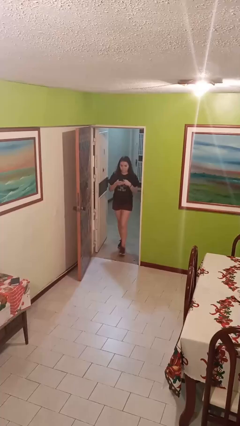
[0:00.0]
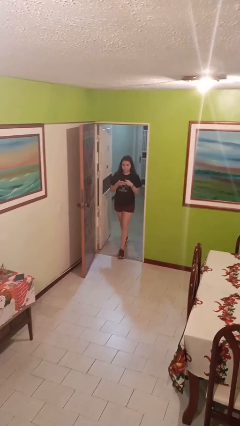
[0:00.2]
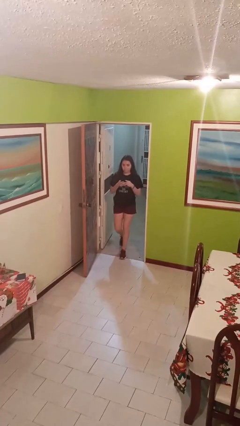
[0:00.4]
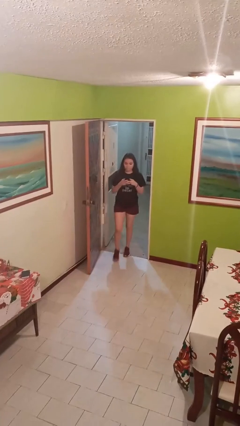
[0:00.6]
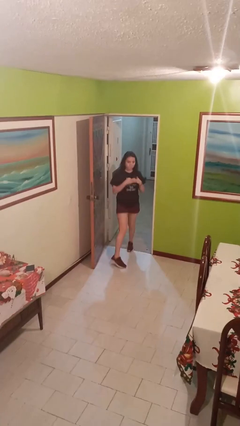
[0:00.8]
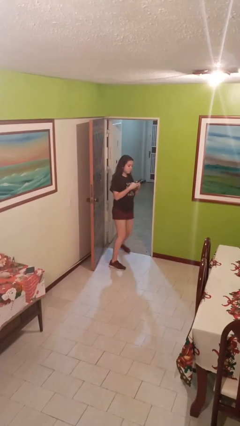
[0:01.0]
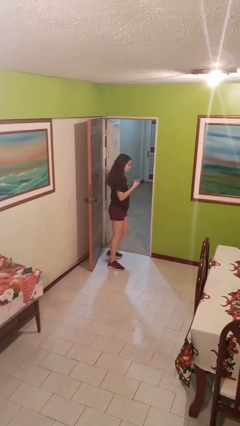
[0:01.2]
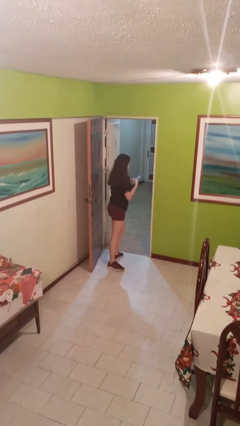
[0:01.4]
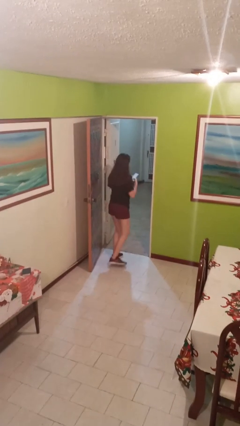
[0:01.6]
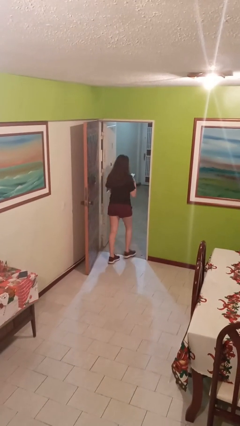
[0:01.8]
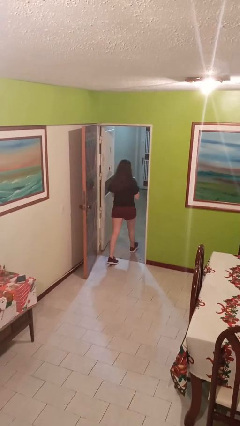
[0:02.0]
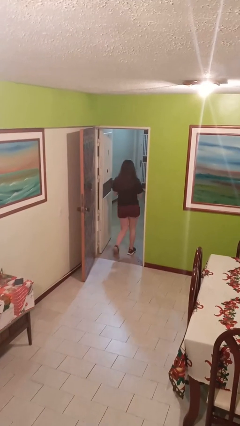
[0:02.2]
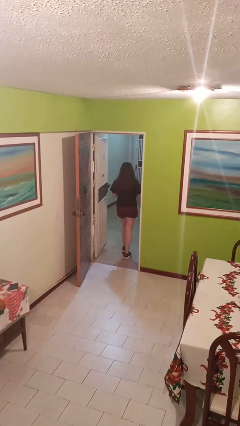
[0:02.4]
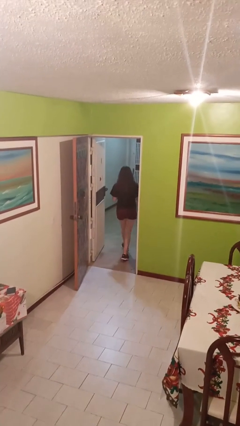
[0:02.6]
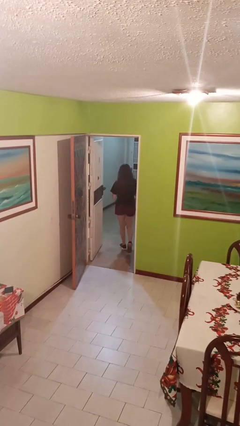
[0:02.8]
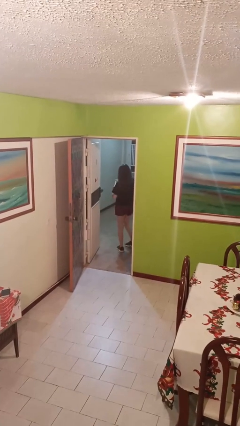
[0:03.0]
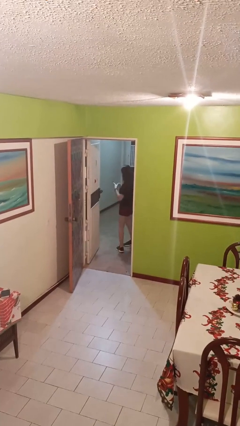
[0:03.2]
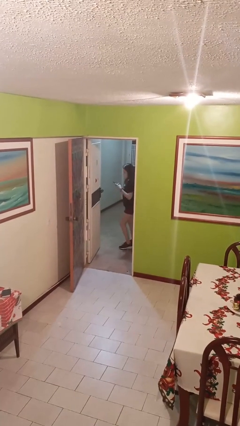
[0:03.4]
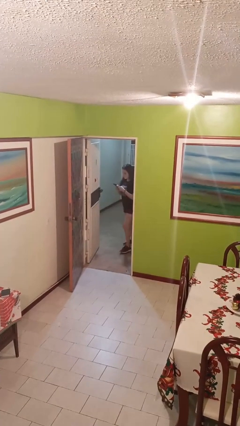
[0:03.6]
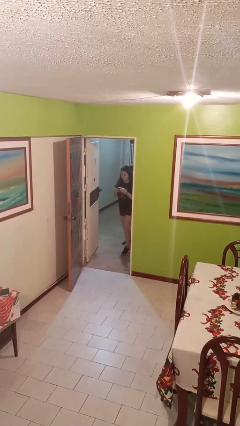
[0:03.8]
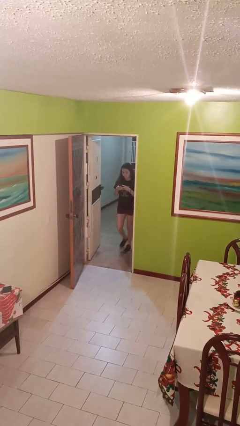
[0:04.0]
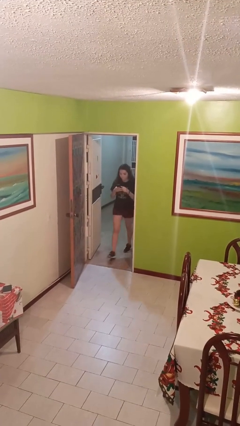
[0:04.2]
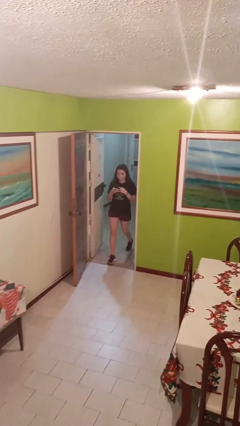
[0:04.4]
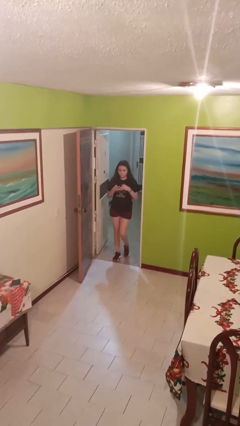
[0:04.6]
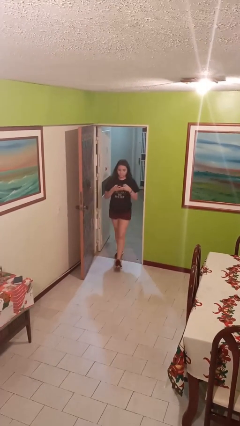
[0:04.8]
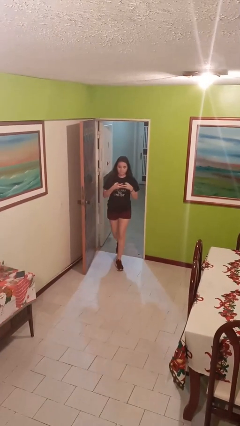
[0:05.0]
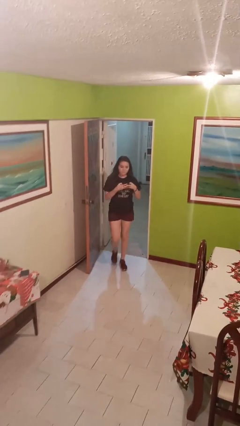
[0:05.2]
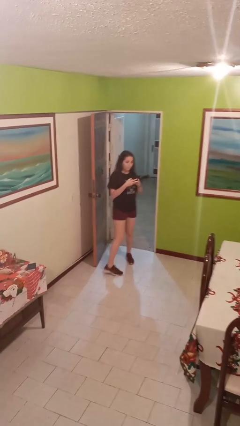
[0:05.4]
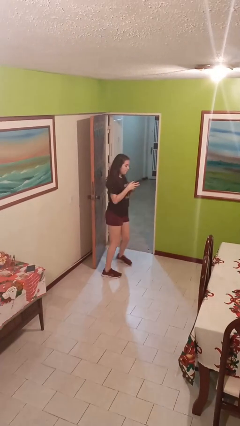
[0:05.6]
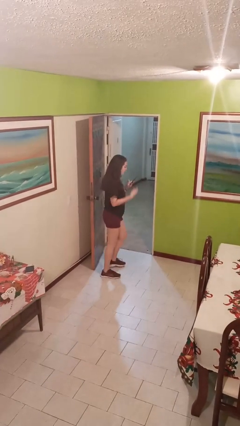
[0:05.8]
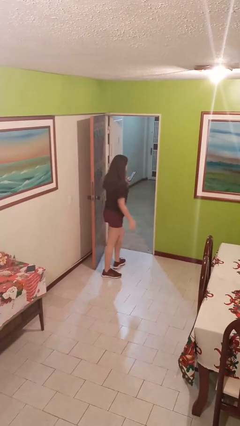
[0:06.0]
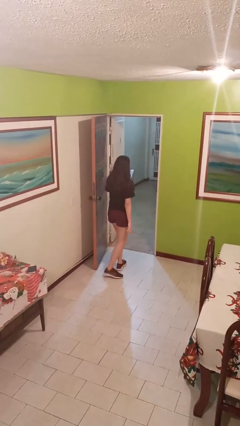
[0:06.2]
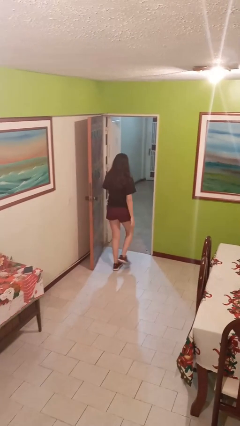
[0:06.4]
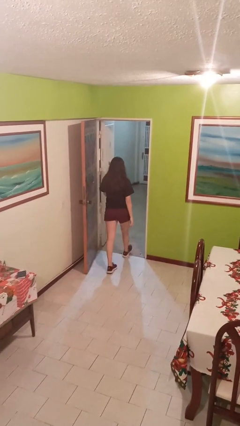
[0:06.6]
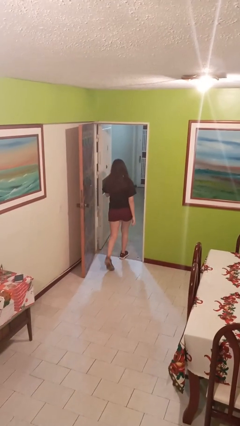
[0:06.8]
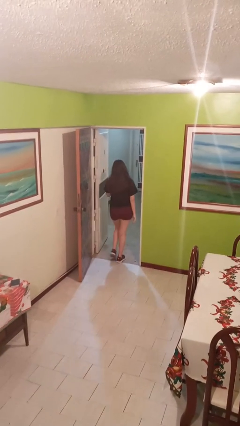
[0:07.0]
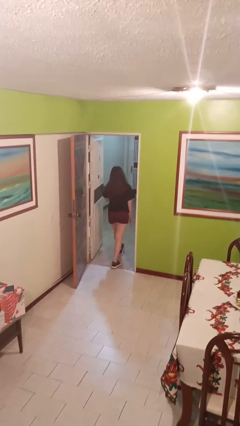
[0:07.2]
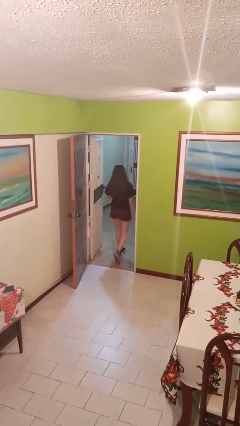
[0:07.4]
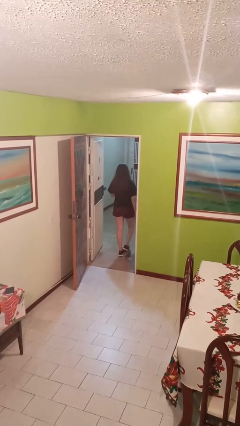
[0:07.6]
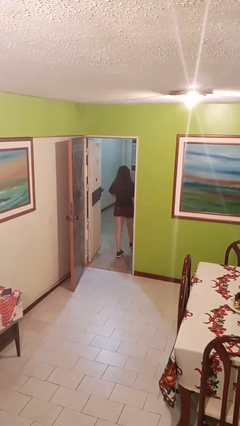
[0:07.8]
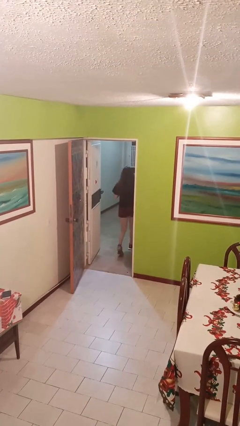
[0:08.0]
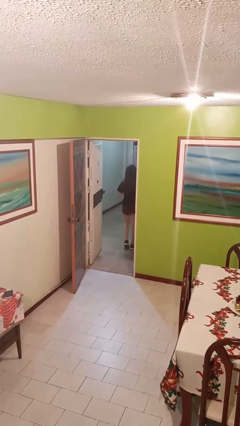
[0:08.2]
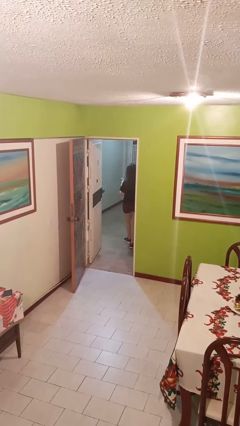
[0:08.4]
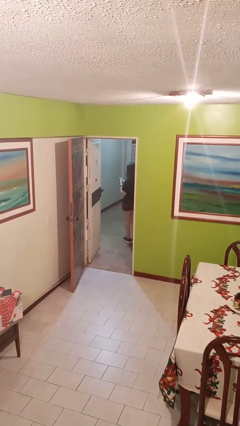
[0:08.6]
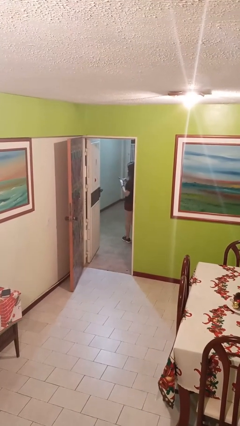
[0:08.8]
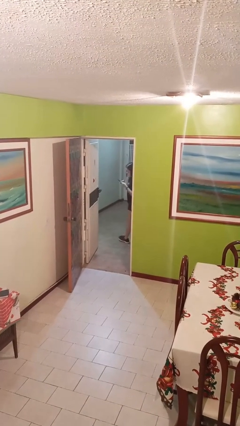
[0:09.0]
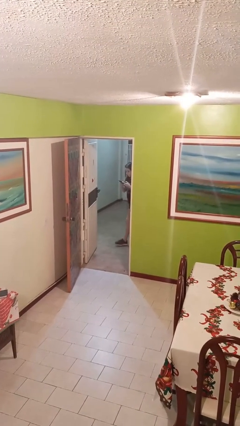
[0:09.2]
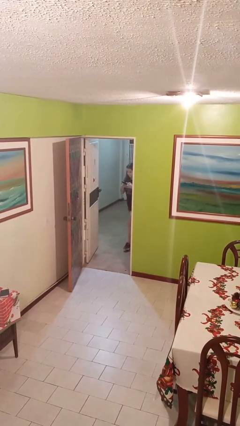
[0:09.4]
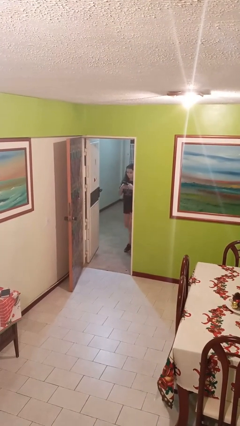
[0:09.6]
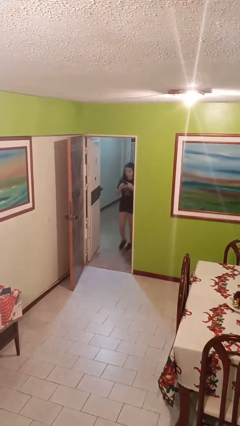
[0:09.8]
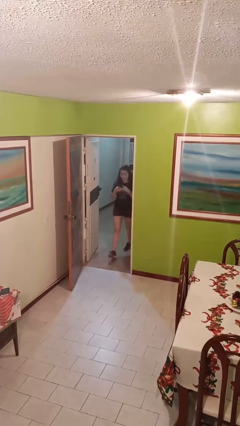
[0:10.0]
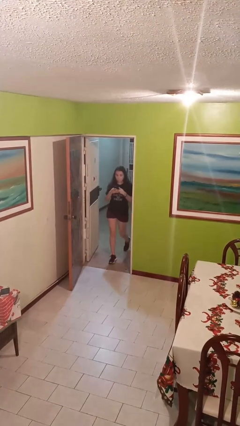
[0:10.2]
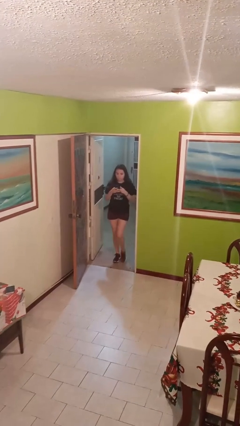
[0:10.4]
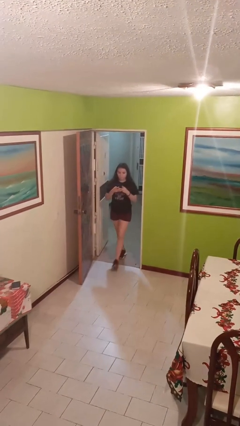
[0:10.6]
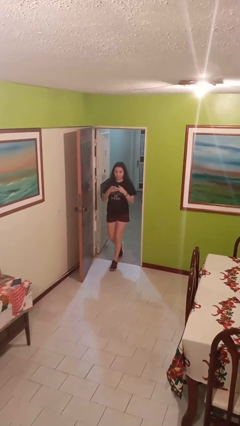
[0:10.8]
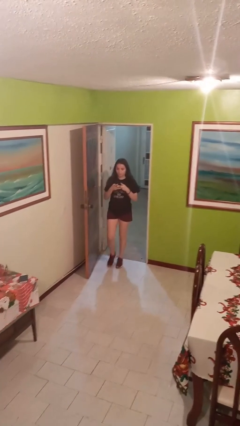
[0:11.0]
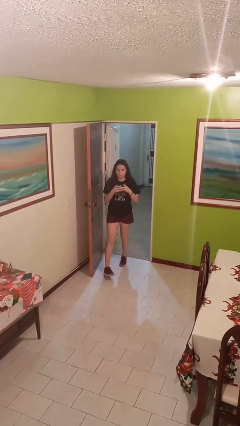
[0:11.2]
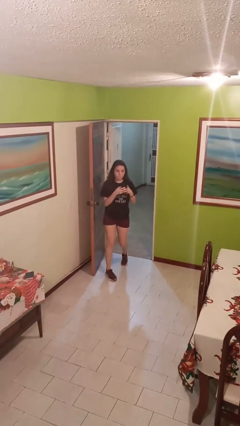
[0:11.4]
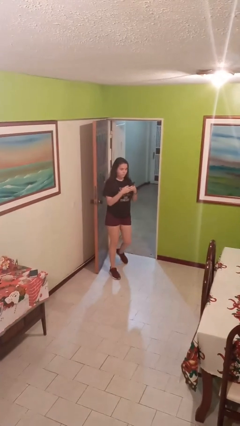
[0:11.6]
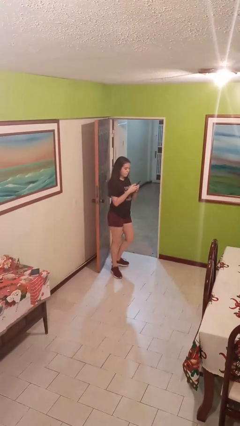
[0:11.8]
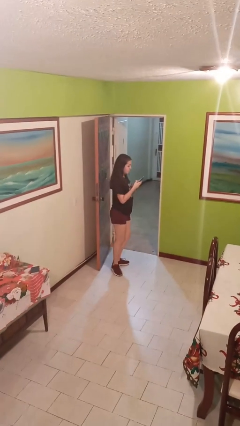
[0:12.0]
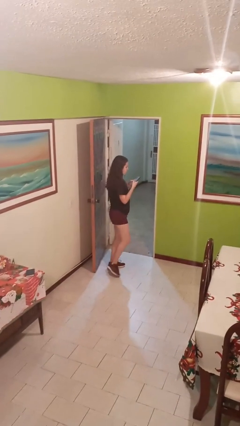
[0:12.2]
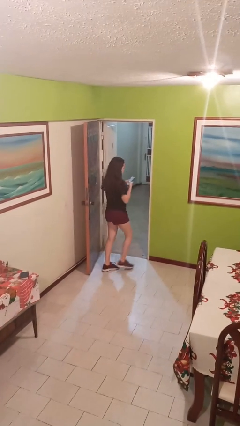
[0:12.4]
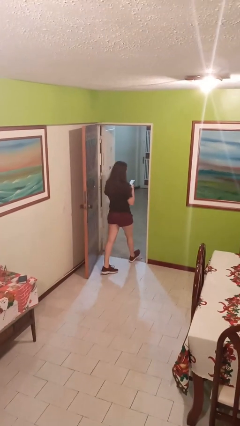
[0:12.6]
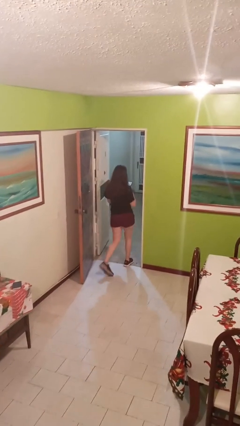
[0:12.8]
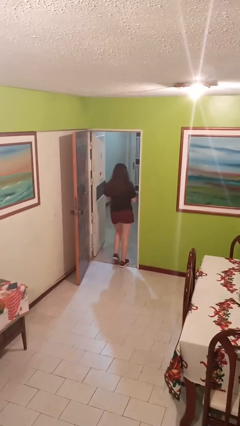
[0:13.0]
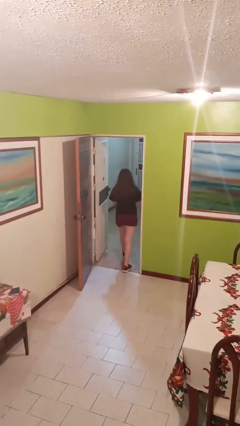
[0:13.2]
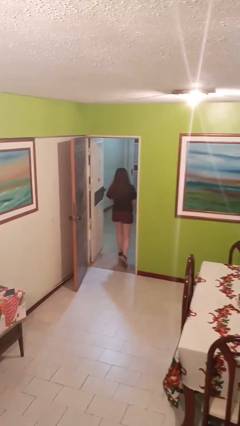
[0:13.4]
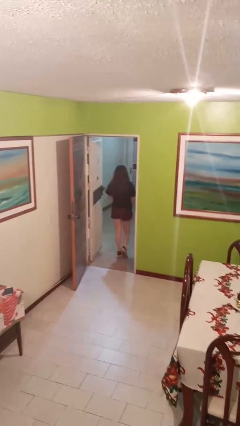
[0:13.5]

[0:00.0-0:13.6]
person texts on phone

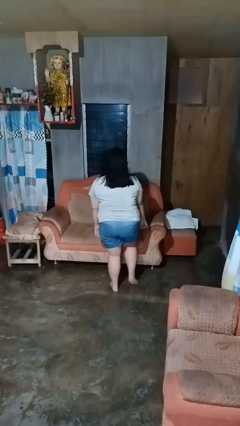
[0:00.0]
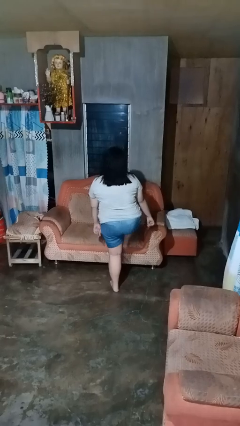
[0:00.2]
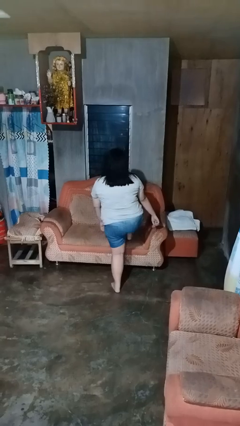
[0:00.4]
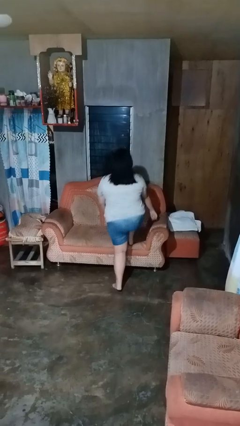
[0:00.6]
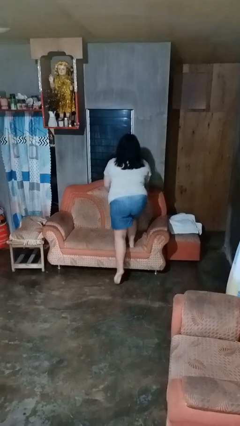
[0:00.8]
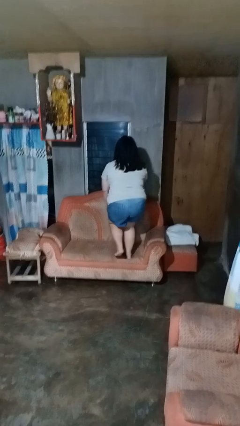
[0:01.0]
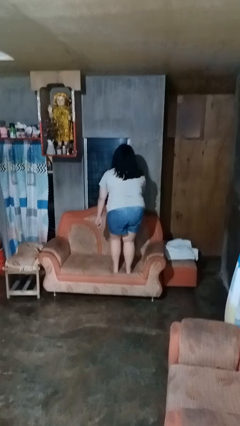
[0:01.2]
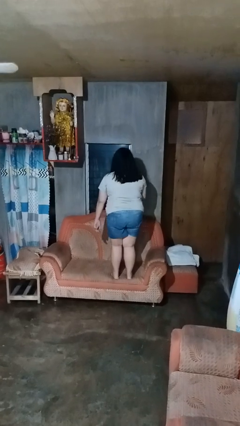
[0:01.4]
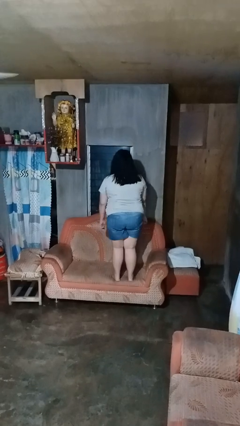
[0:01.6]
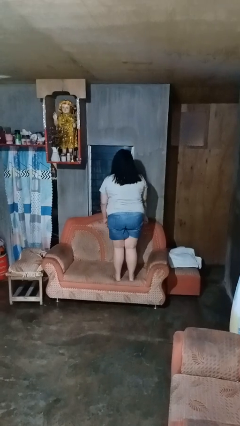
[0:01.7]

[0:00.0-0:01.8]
person climbs on couch

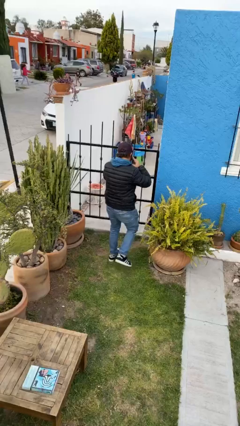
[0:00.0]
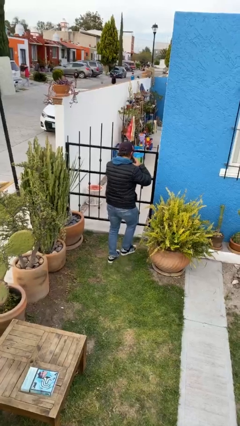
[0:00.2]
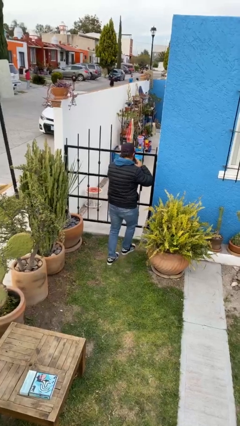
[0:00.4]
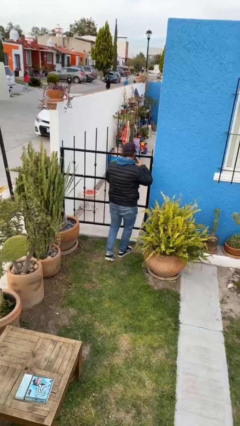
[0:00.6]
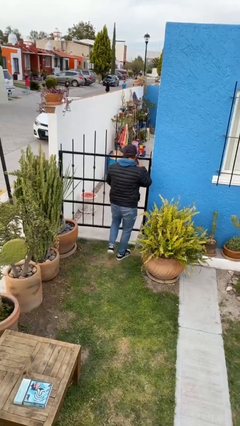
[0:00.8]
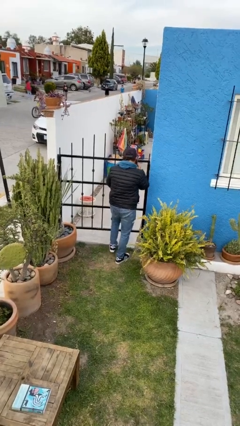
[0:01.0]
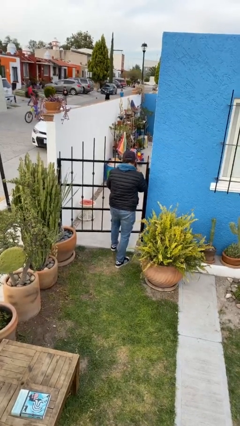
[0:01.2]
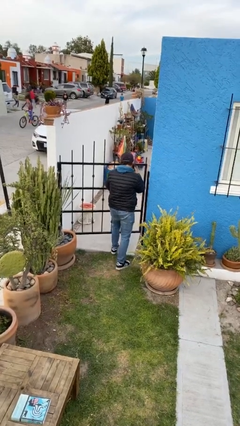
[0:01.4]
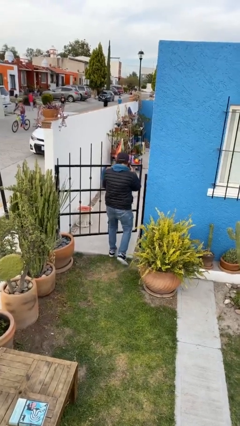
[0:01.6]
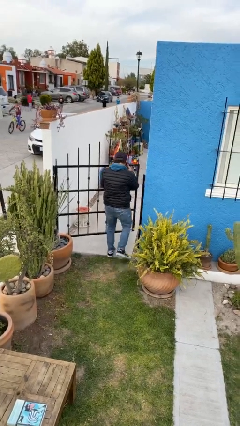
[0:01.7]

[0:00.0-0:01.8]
person opens facility door

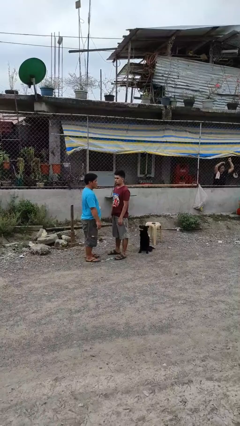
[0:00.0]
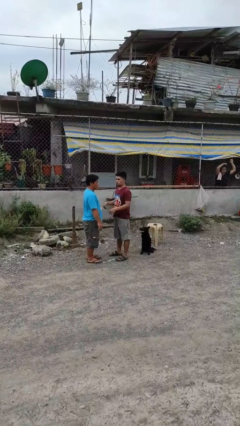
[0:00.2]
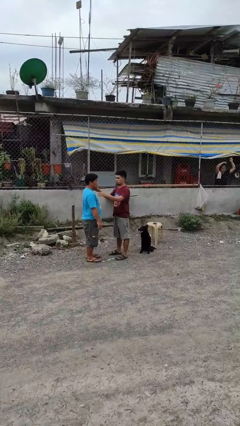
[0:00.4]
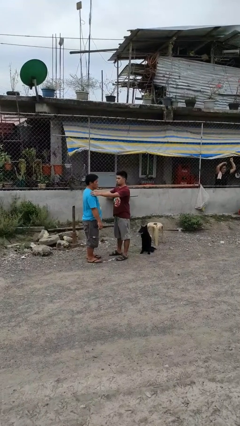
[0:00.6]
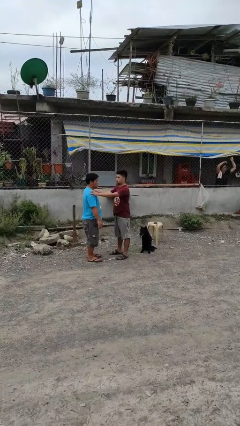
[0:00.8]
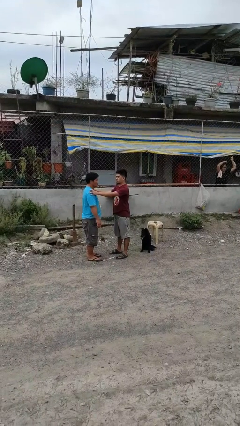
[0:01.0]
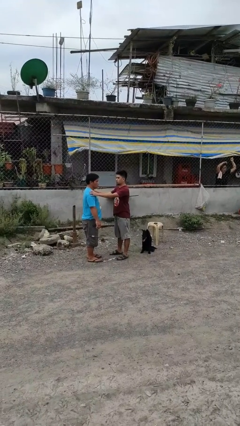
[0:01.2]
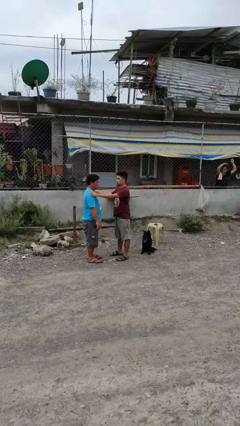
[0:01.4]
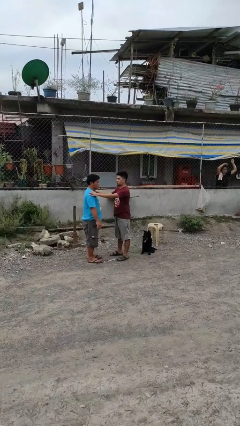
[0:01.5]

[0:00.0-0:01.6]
person grabs person by shoulder
